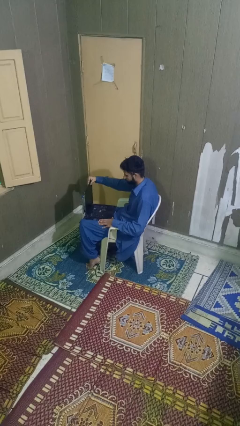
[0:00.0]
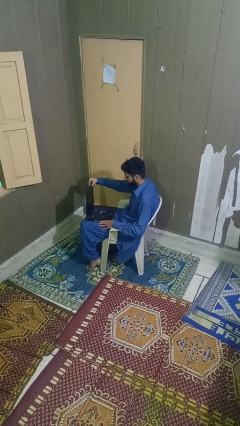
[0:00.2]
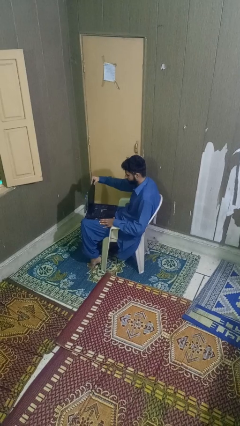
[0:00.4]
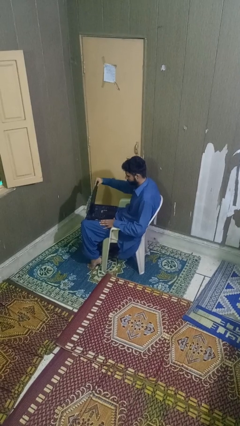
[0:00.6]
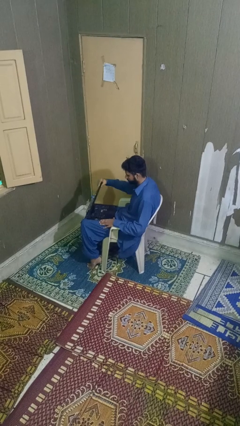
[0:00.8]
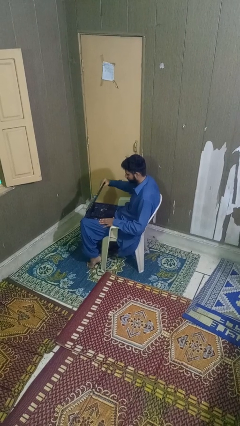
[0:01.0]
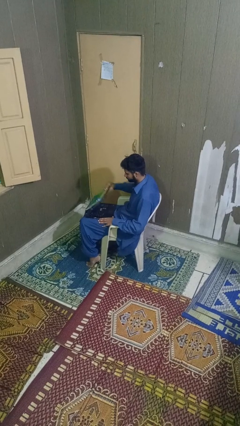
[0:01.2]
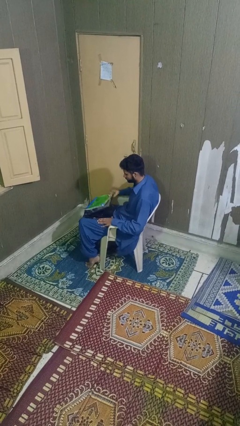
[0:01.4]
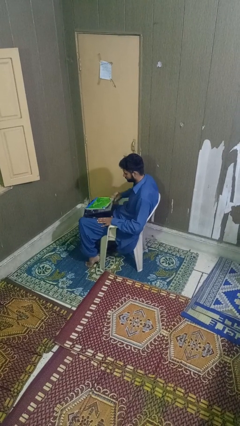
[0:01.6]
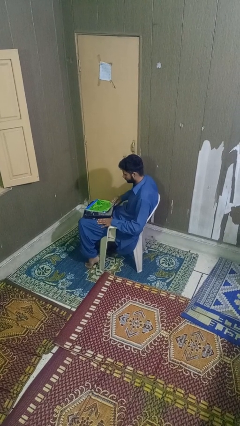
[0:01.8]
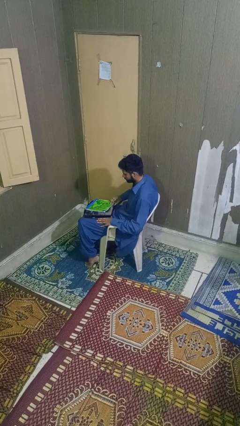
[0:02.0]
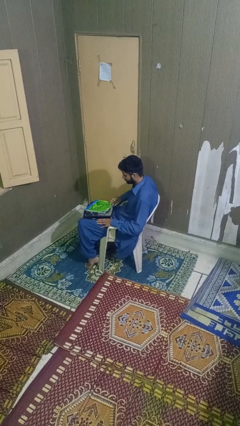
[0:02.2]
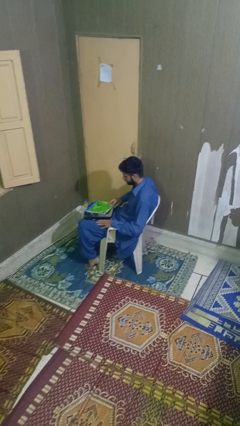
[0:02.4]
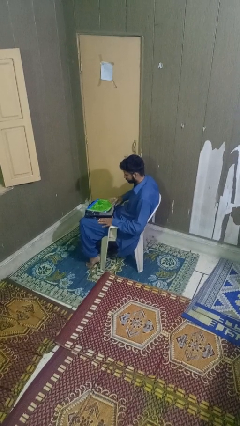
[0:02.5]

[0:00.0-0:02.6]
person closes laptop

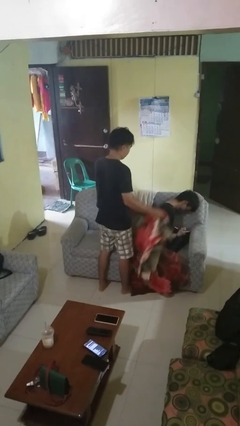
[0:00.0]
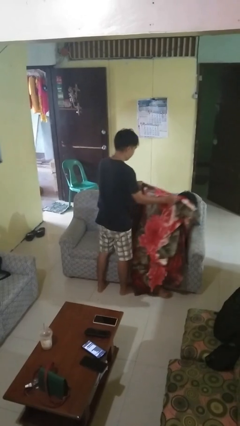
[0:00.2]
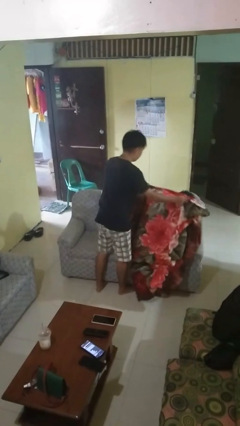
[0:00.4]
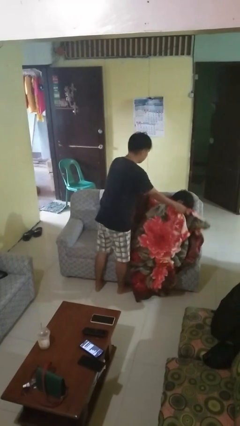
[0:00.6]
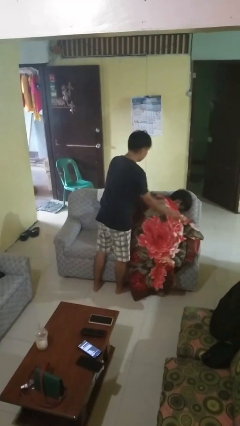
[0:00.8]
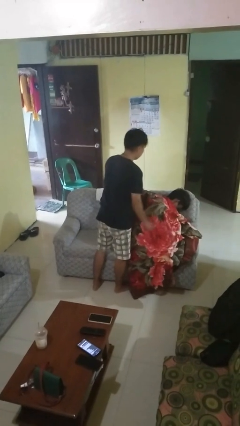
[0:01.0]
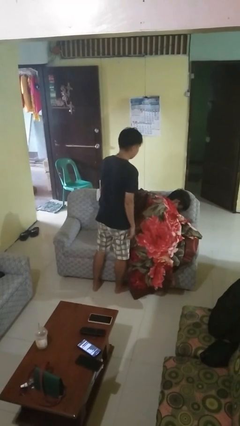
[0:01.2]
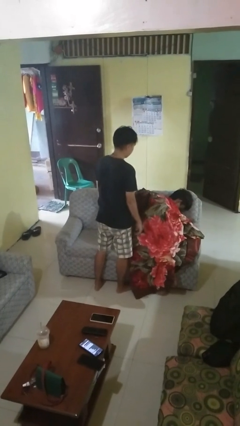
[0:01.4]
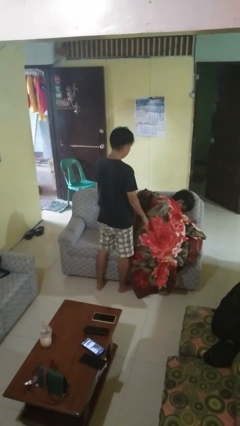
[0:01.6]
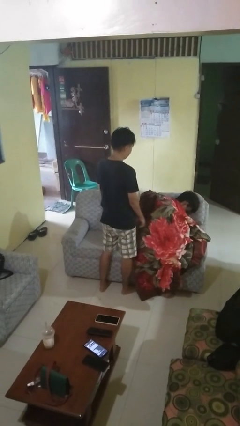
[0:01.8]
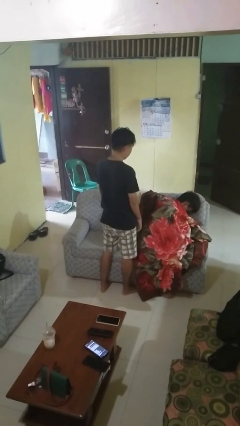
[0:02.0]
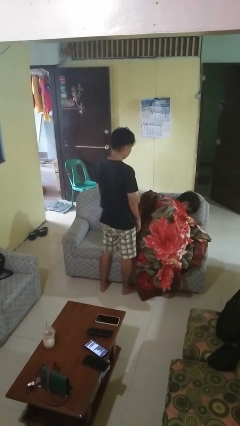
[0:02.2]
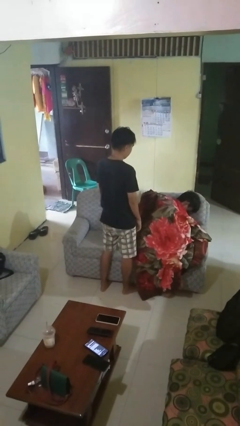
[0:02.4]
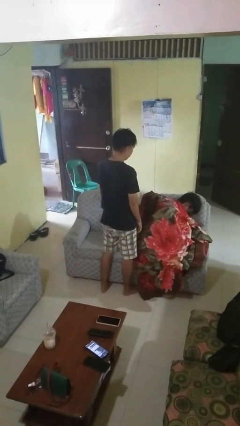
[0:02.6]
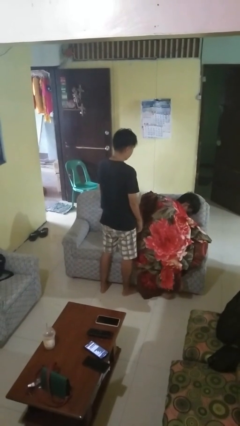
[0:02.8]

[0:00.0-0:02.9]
person covers friend with blanket

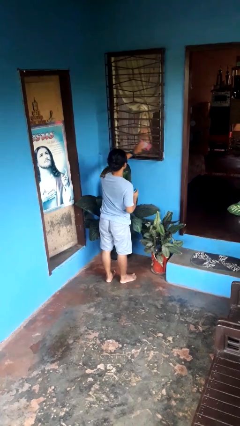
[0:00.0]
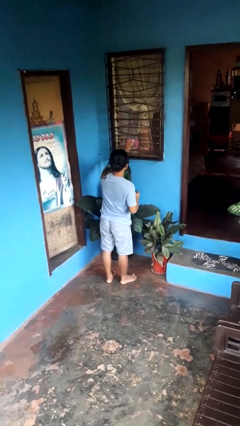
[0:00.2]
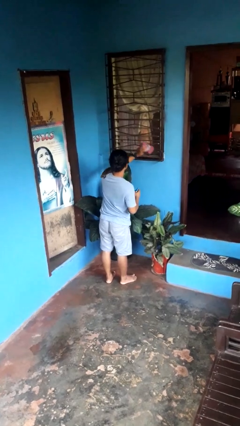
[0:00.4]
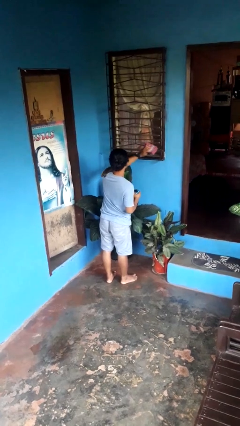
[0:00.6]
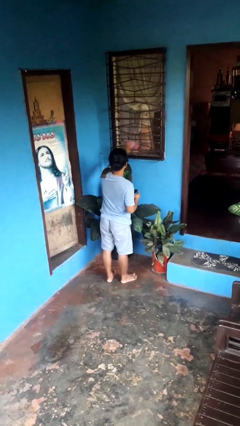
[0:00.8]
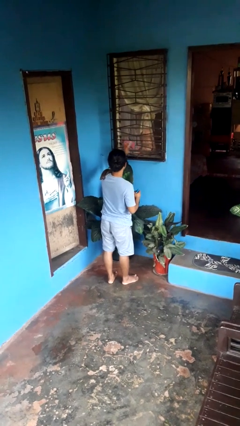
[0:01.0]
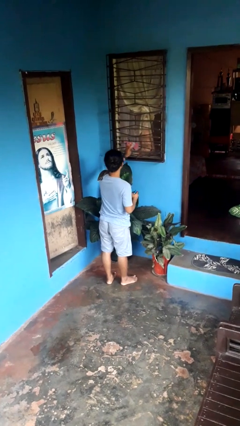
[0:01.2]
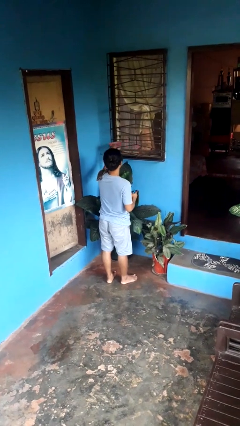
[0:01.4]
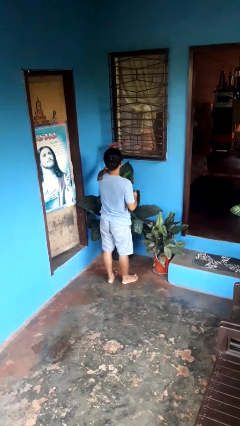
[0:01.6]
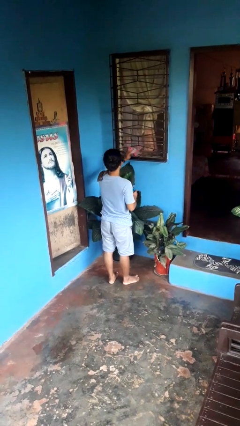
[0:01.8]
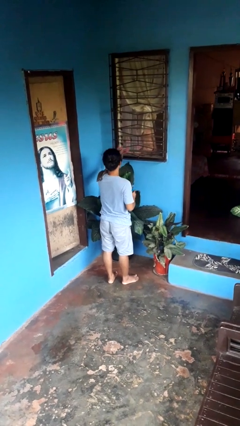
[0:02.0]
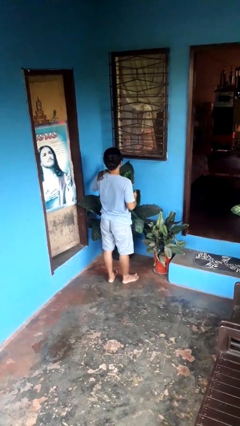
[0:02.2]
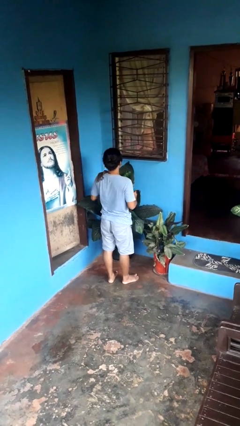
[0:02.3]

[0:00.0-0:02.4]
person washes window

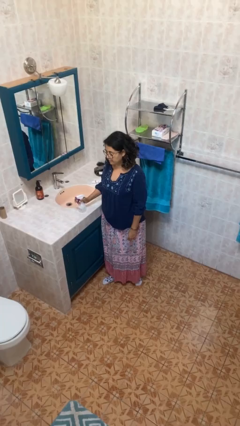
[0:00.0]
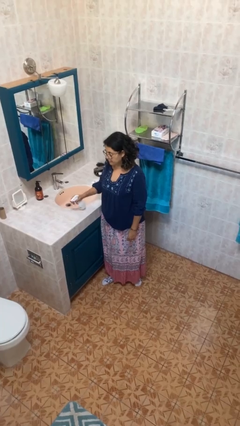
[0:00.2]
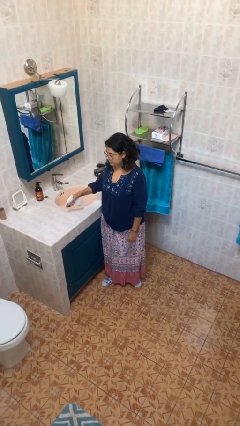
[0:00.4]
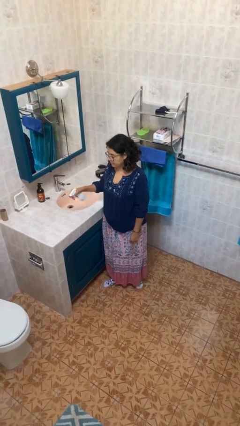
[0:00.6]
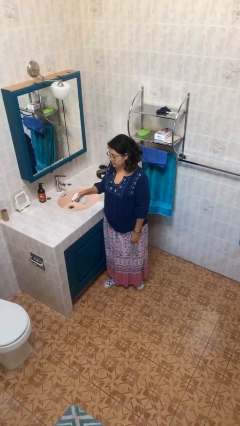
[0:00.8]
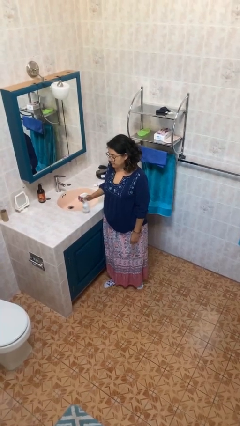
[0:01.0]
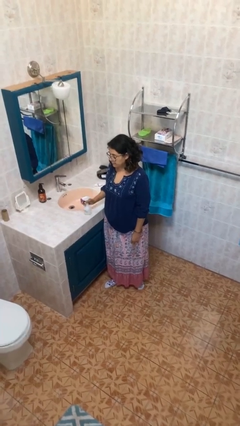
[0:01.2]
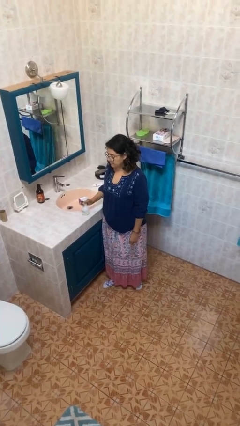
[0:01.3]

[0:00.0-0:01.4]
person sprays from bottle

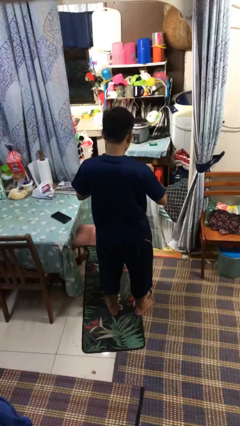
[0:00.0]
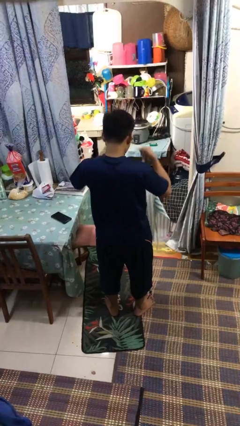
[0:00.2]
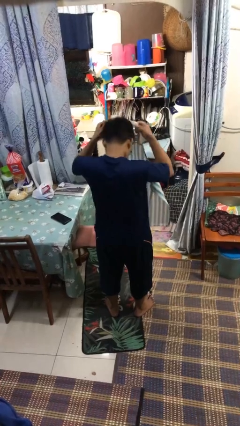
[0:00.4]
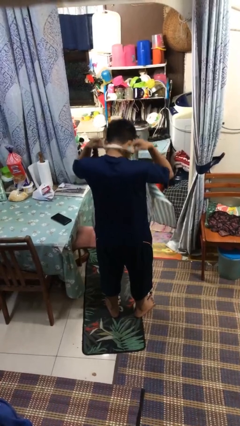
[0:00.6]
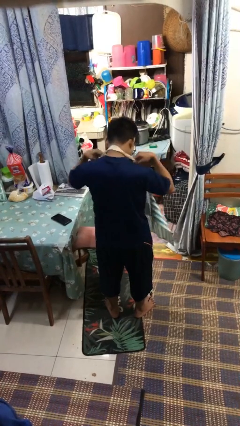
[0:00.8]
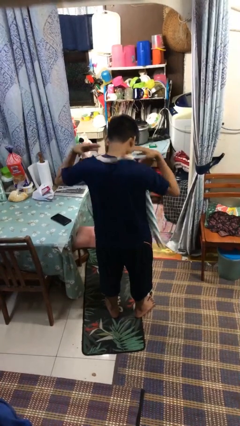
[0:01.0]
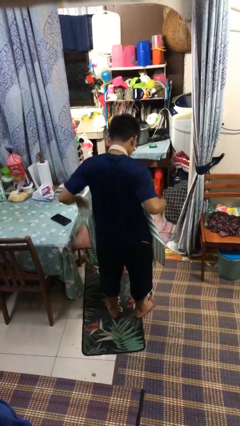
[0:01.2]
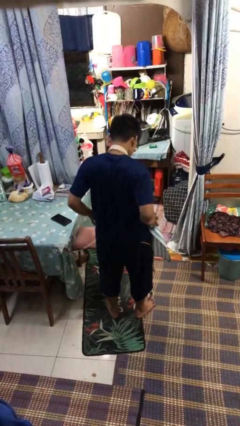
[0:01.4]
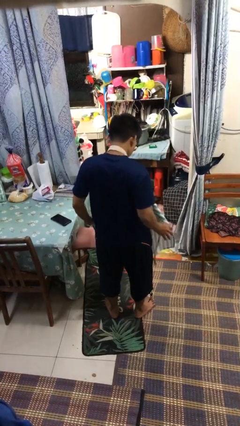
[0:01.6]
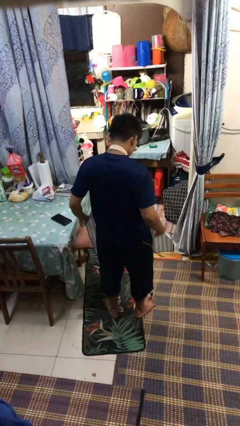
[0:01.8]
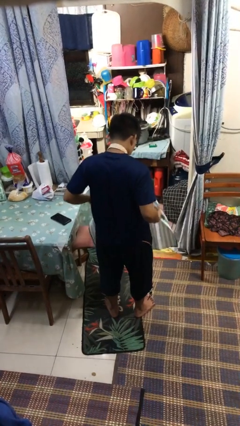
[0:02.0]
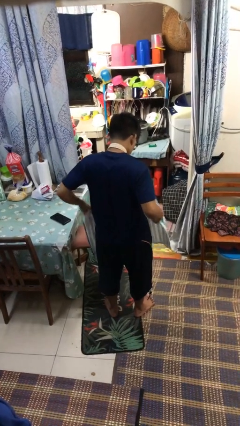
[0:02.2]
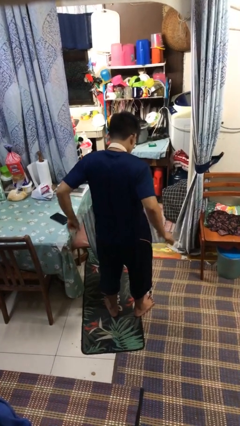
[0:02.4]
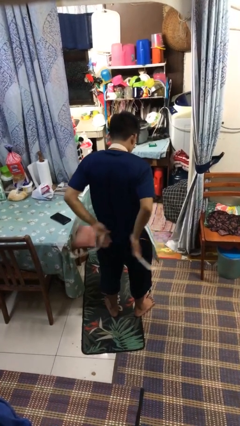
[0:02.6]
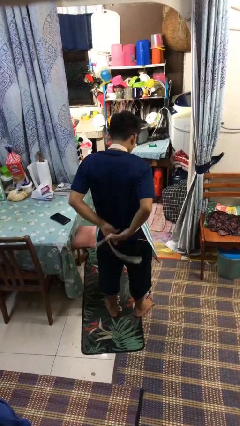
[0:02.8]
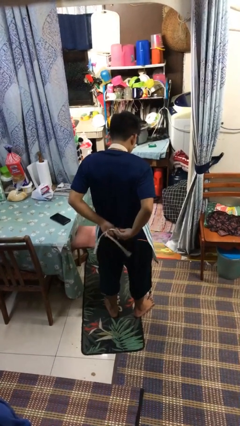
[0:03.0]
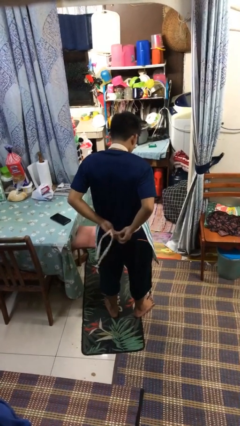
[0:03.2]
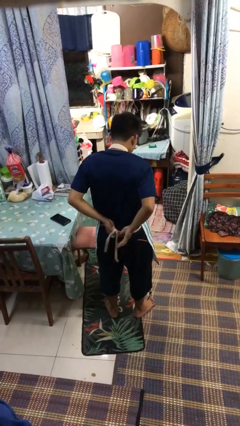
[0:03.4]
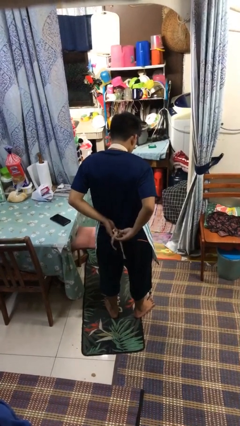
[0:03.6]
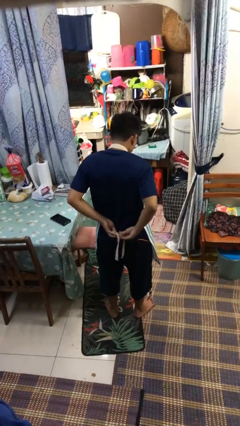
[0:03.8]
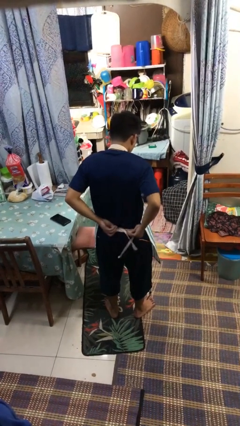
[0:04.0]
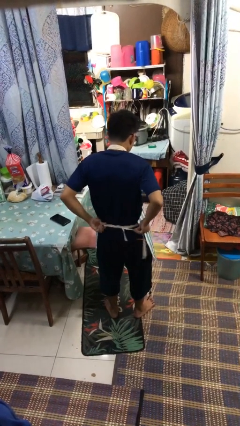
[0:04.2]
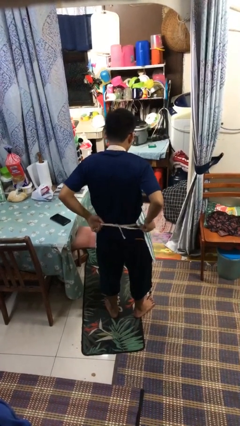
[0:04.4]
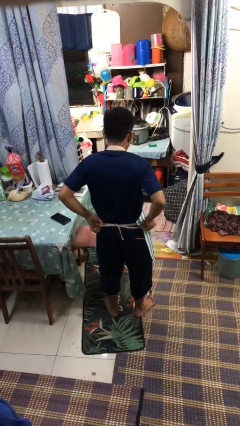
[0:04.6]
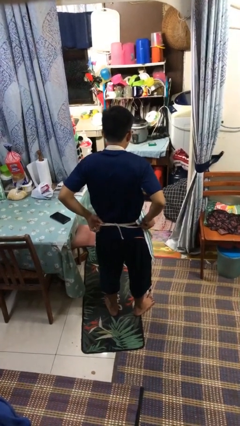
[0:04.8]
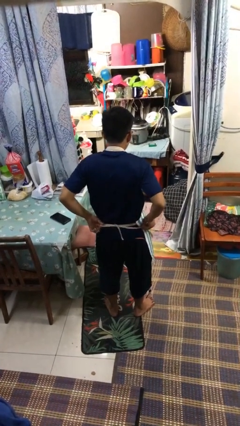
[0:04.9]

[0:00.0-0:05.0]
person puts on apron

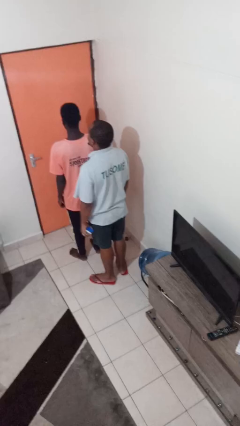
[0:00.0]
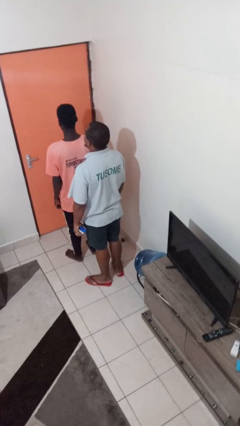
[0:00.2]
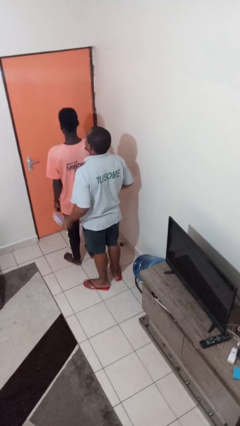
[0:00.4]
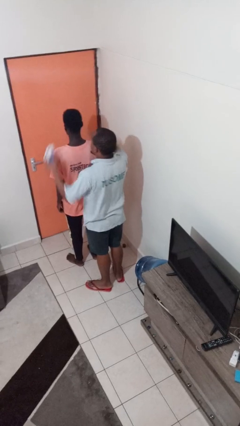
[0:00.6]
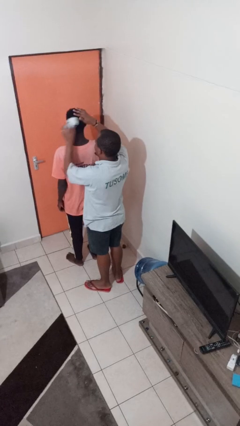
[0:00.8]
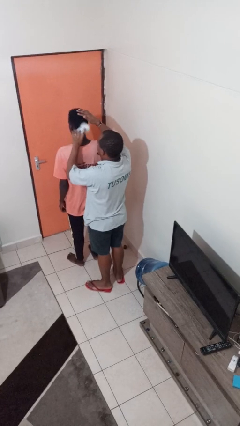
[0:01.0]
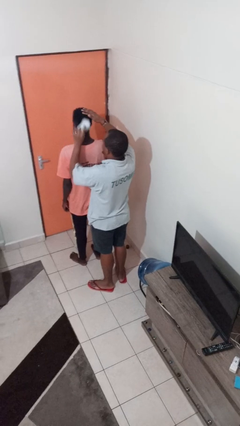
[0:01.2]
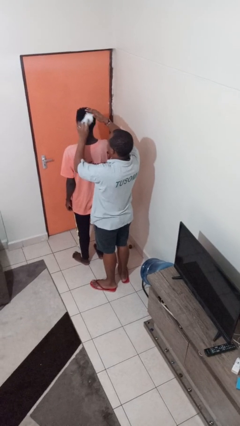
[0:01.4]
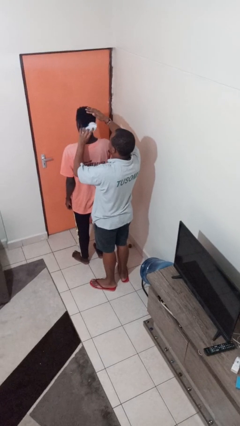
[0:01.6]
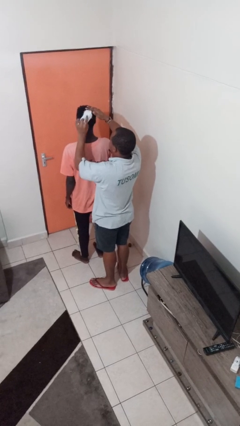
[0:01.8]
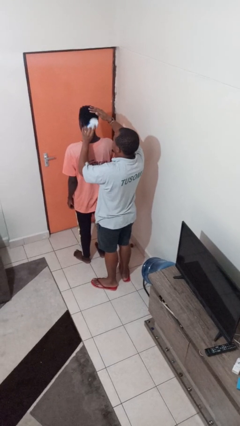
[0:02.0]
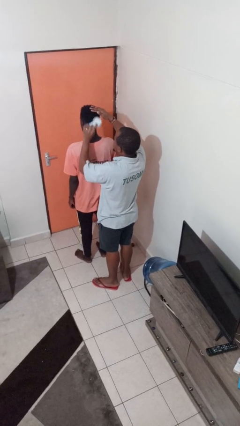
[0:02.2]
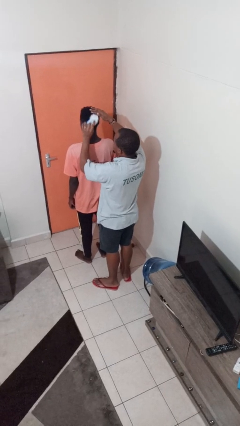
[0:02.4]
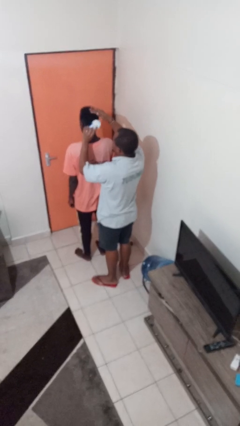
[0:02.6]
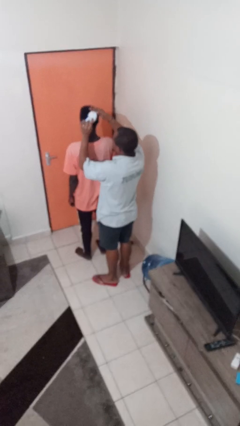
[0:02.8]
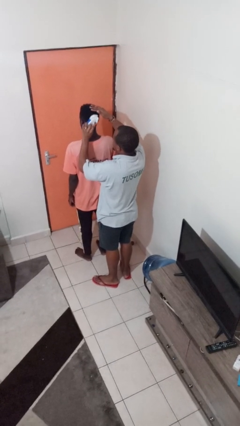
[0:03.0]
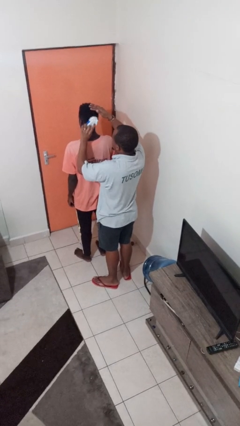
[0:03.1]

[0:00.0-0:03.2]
person brushes hair of person
